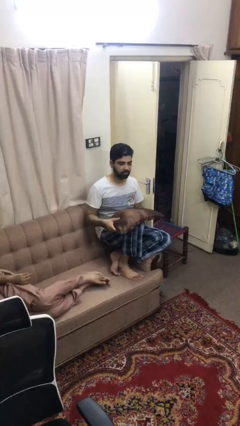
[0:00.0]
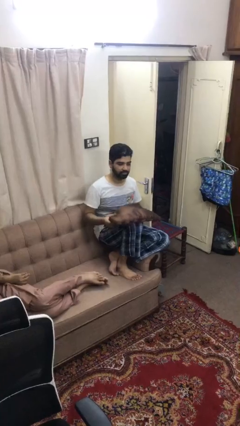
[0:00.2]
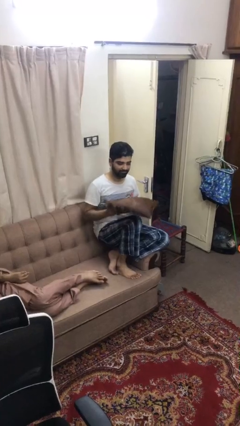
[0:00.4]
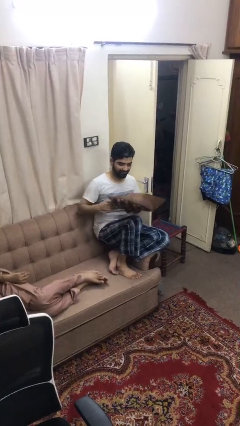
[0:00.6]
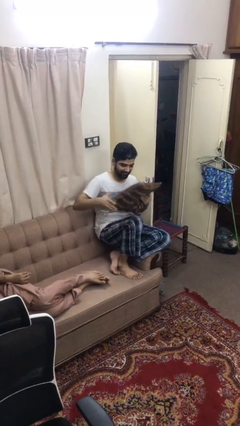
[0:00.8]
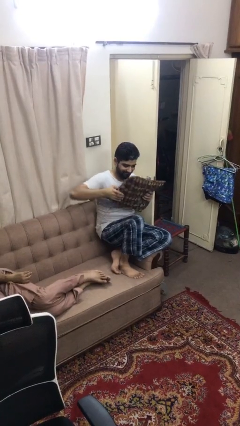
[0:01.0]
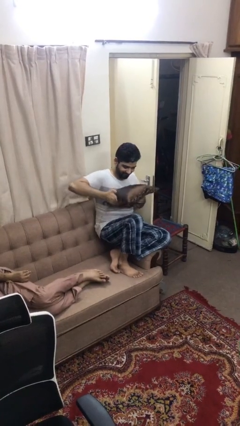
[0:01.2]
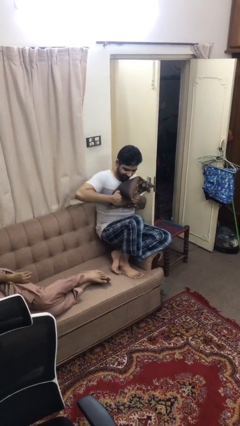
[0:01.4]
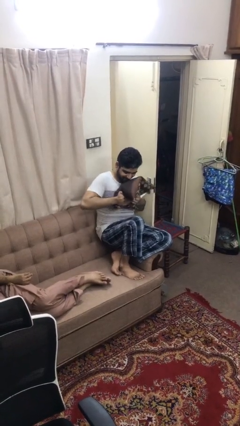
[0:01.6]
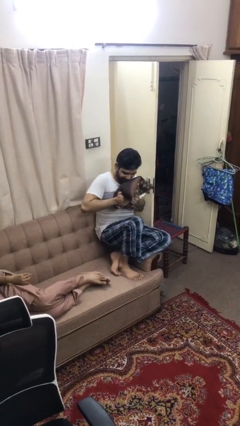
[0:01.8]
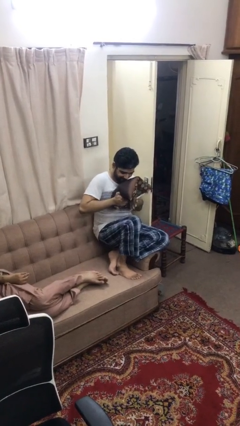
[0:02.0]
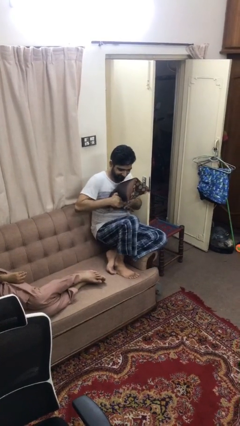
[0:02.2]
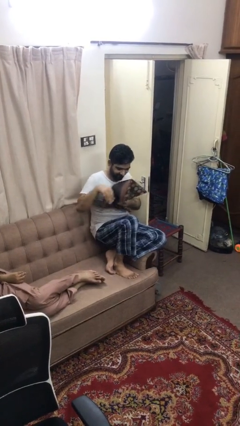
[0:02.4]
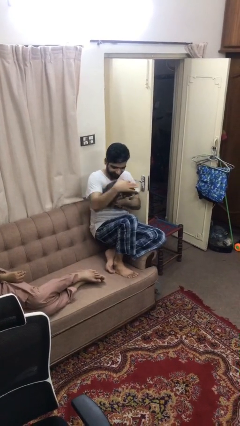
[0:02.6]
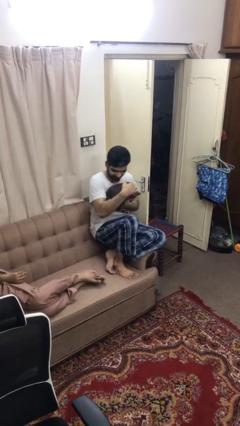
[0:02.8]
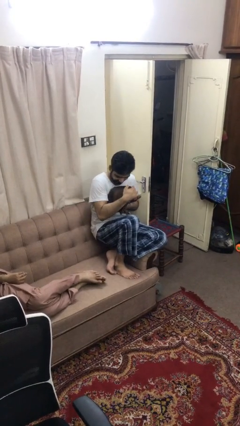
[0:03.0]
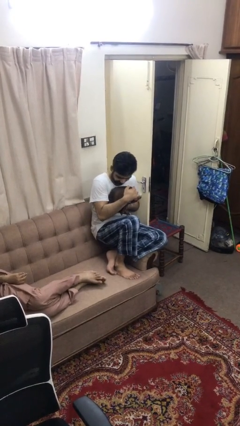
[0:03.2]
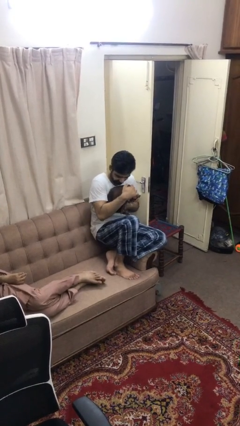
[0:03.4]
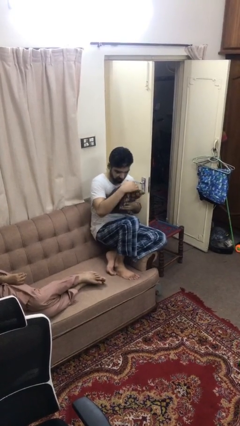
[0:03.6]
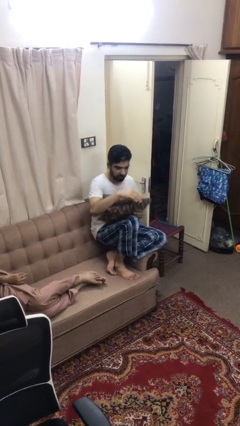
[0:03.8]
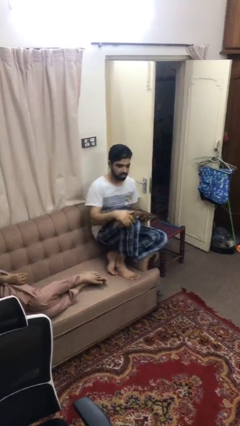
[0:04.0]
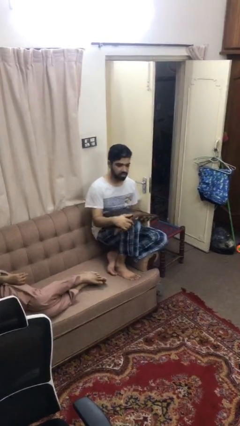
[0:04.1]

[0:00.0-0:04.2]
person squeezes object

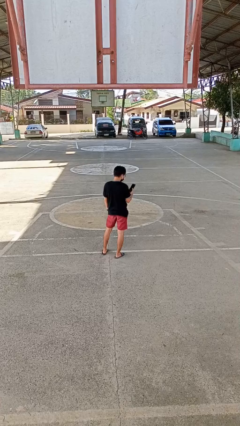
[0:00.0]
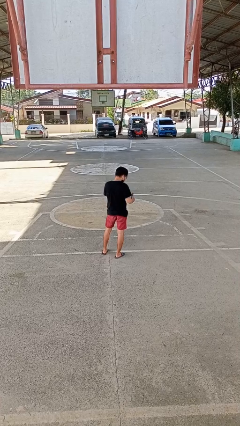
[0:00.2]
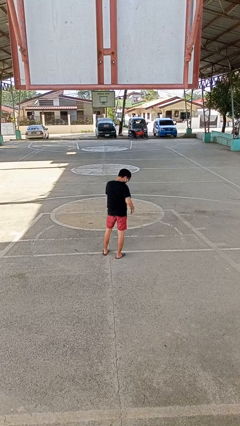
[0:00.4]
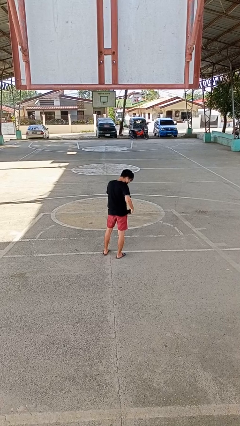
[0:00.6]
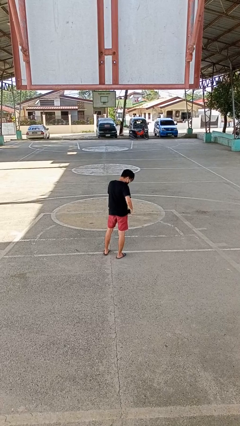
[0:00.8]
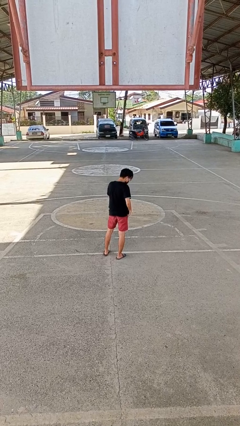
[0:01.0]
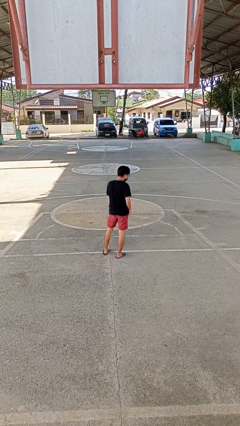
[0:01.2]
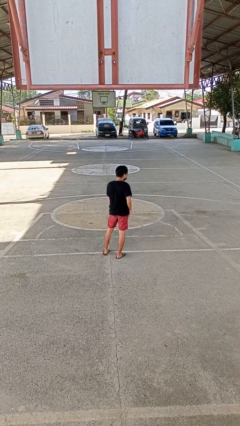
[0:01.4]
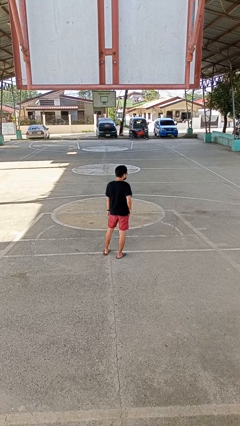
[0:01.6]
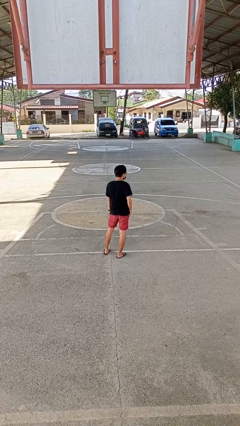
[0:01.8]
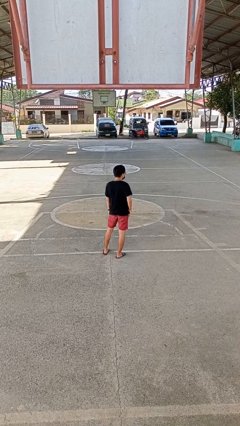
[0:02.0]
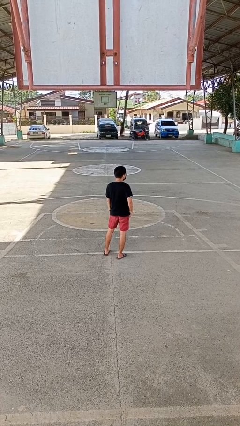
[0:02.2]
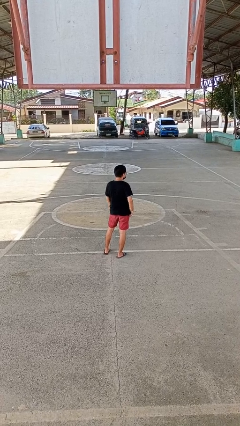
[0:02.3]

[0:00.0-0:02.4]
person puts phone into pocket

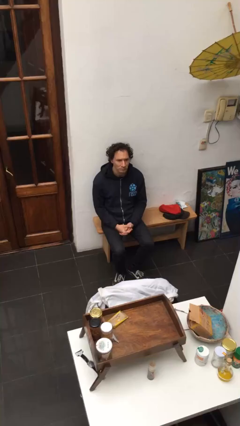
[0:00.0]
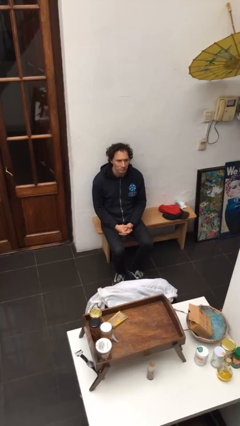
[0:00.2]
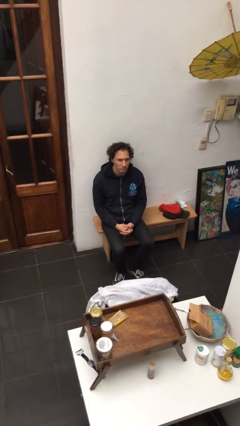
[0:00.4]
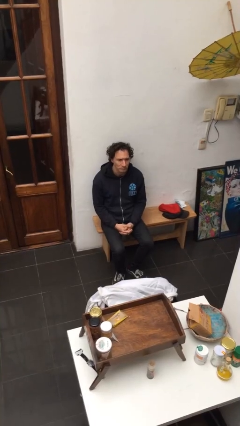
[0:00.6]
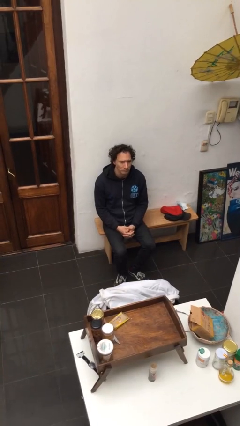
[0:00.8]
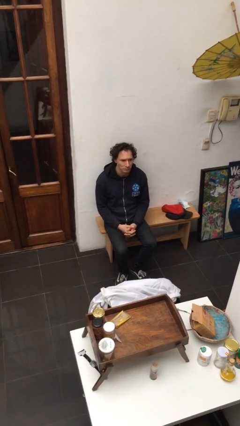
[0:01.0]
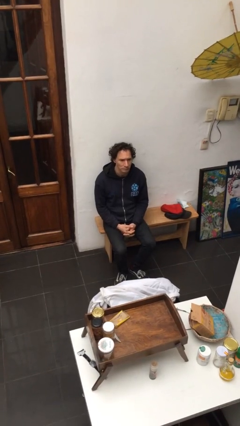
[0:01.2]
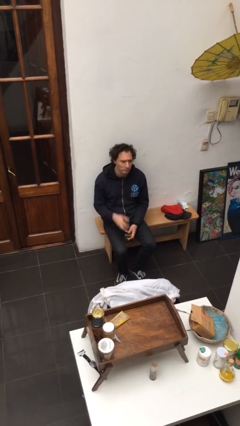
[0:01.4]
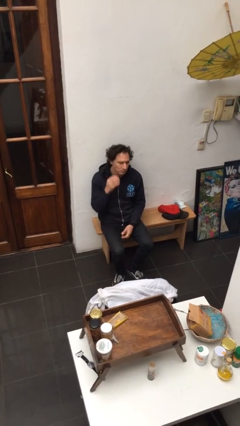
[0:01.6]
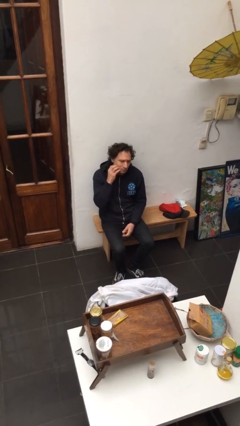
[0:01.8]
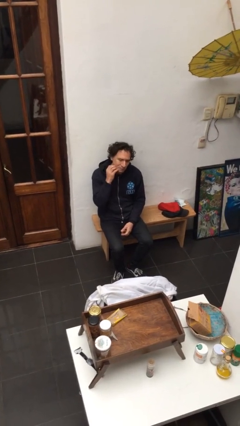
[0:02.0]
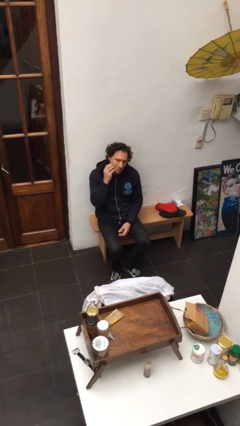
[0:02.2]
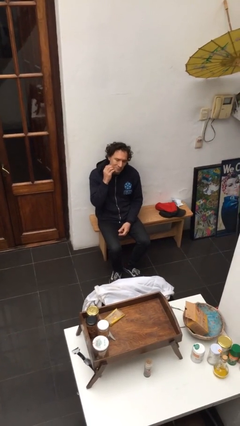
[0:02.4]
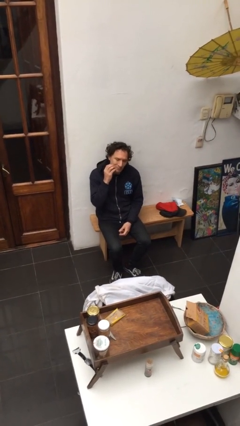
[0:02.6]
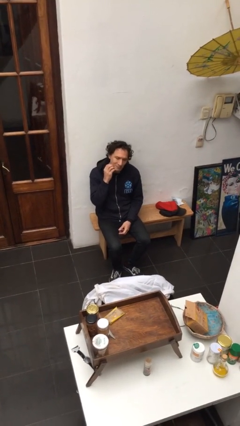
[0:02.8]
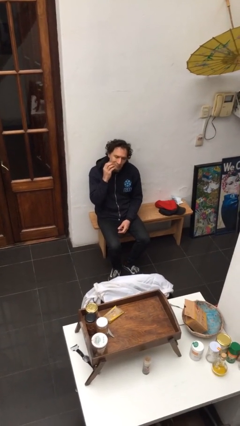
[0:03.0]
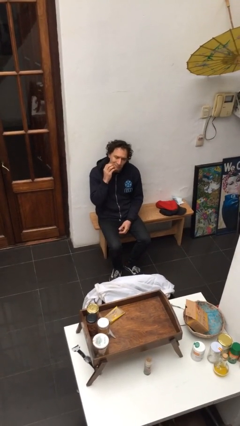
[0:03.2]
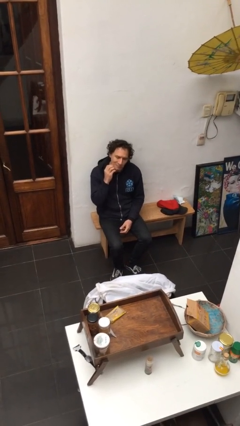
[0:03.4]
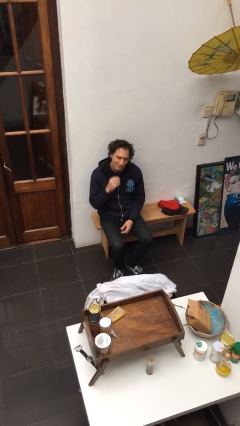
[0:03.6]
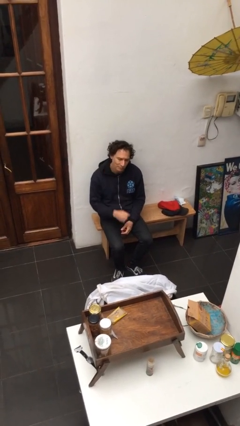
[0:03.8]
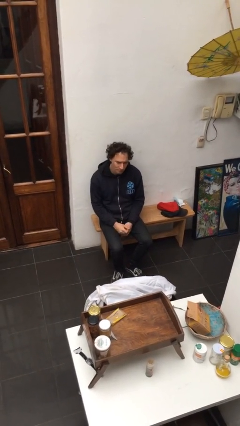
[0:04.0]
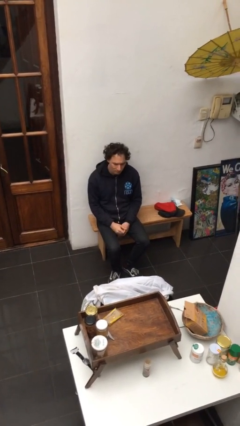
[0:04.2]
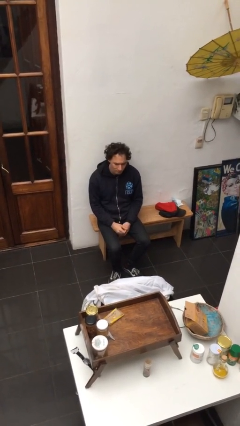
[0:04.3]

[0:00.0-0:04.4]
person scratches face

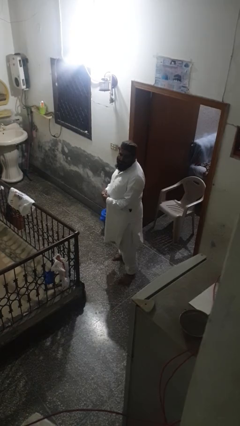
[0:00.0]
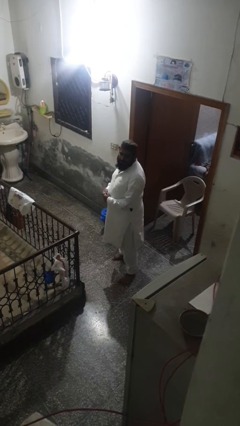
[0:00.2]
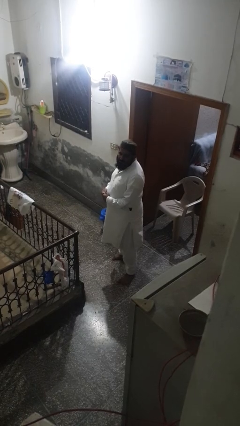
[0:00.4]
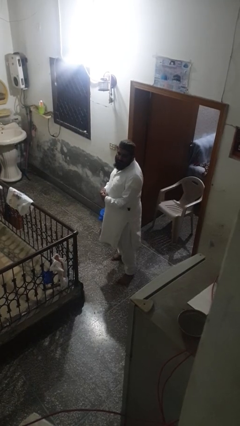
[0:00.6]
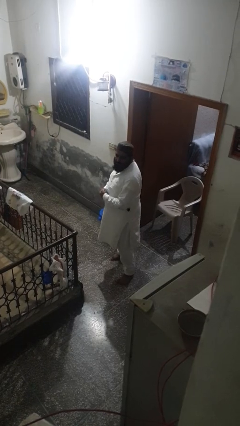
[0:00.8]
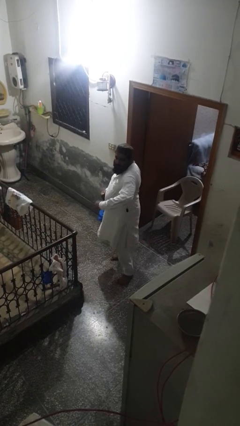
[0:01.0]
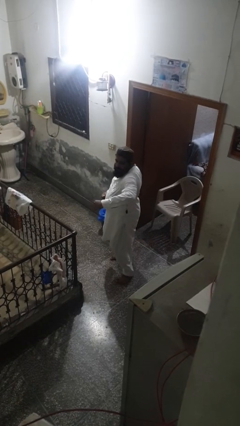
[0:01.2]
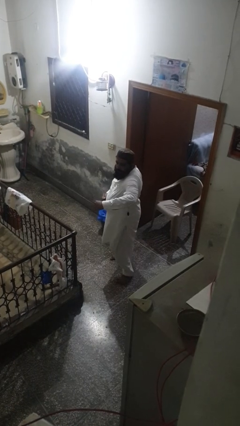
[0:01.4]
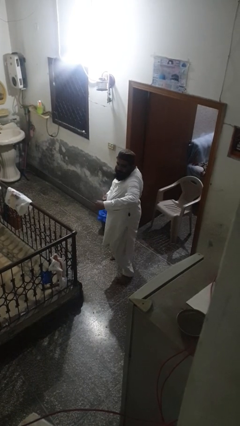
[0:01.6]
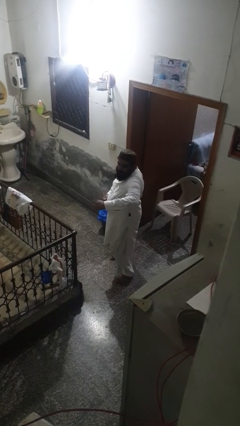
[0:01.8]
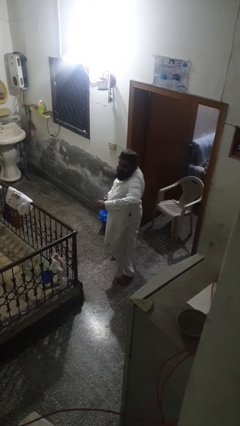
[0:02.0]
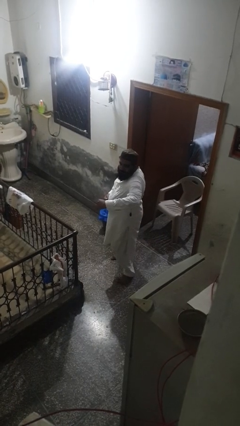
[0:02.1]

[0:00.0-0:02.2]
person karate chop

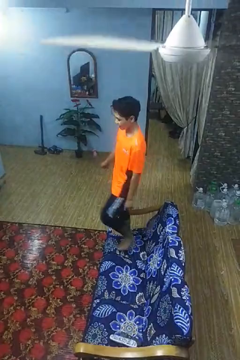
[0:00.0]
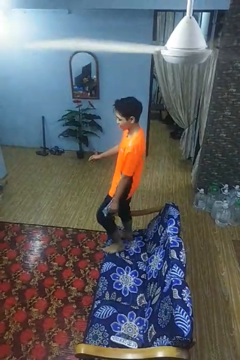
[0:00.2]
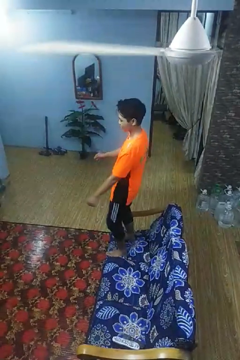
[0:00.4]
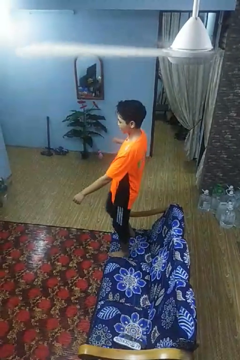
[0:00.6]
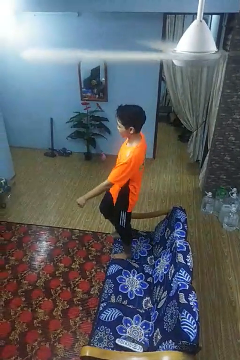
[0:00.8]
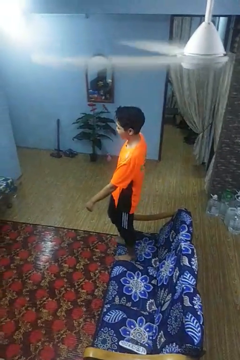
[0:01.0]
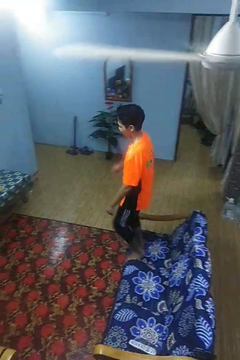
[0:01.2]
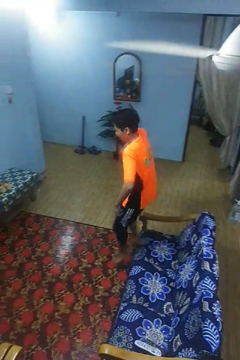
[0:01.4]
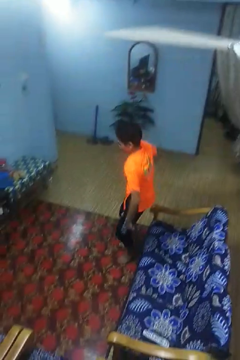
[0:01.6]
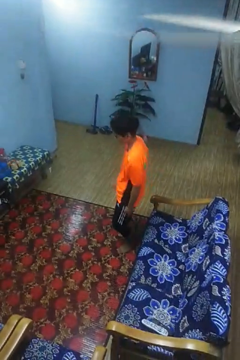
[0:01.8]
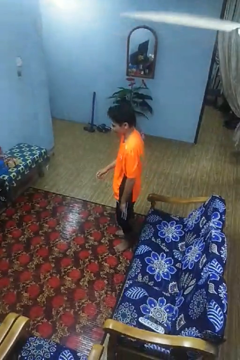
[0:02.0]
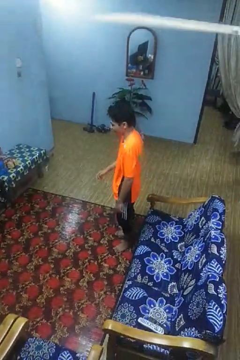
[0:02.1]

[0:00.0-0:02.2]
person jumps on couch

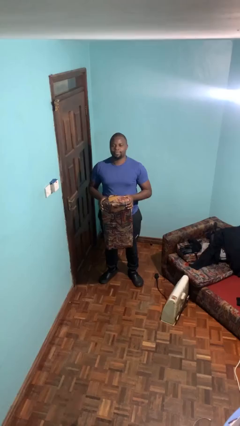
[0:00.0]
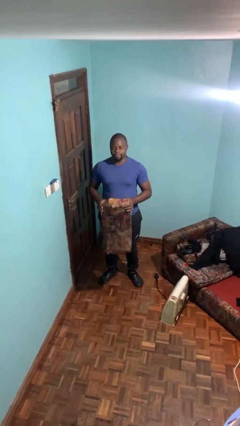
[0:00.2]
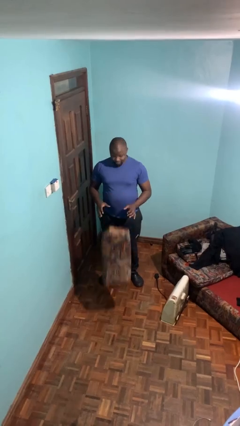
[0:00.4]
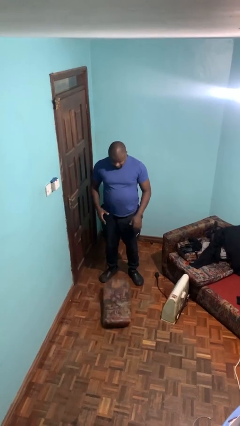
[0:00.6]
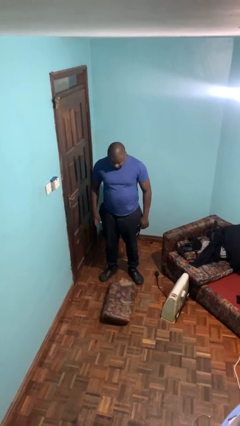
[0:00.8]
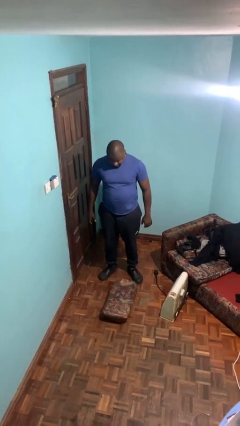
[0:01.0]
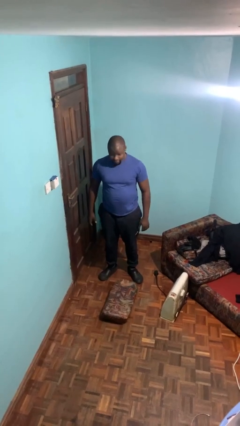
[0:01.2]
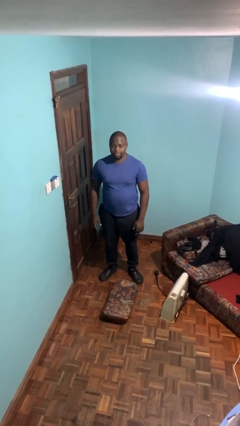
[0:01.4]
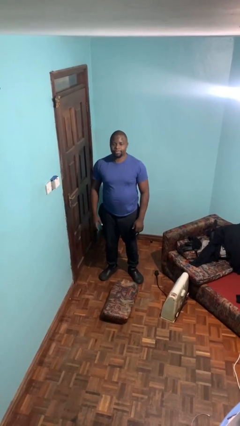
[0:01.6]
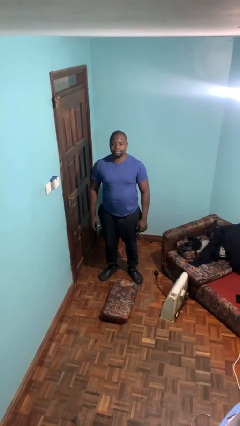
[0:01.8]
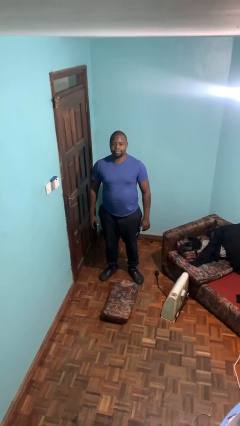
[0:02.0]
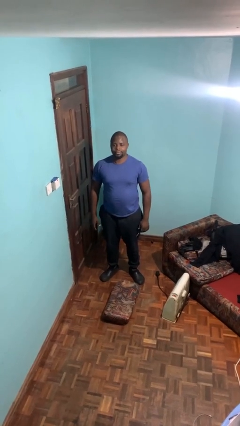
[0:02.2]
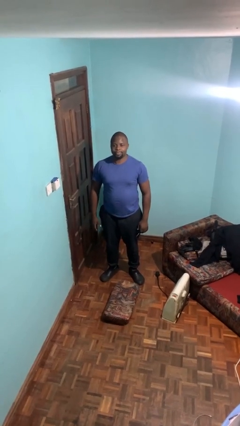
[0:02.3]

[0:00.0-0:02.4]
person drops object
